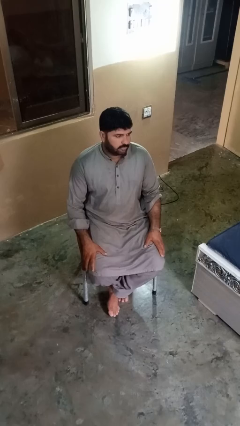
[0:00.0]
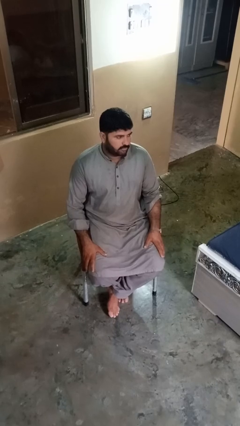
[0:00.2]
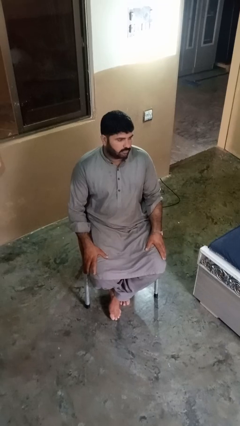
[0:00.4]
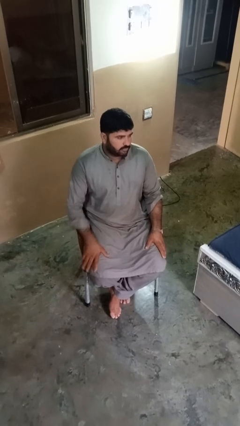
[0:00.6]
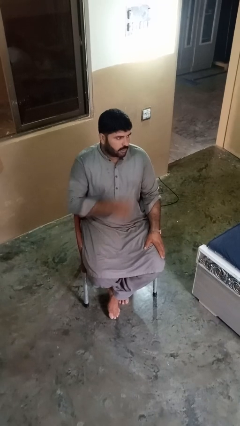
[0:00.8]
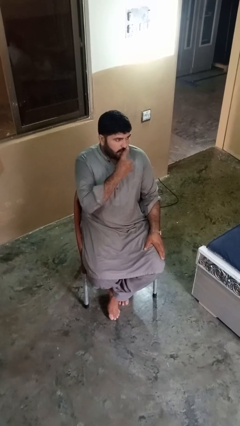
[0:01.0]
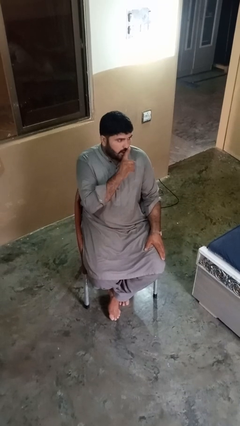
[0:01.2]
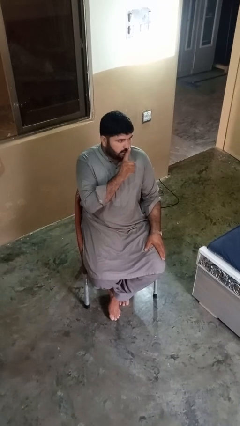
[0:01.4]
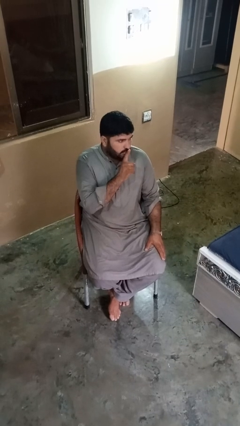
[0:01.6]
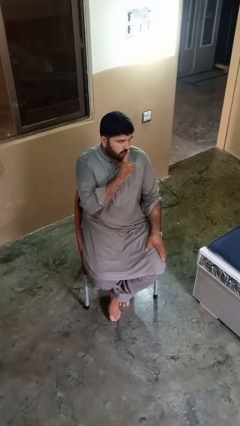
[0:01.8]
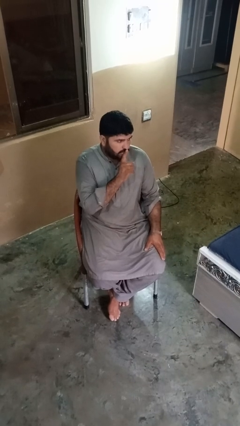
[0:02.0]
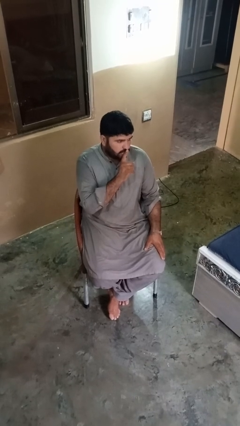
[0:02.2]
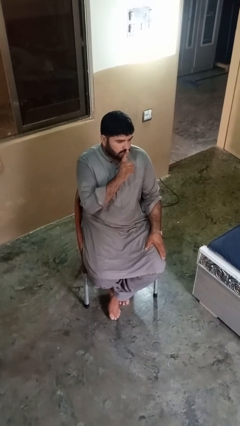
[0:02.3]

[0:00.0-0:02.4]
person gestures be quiet

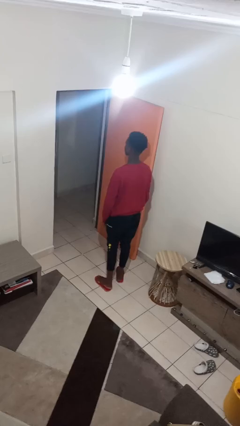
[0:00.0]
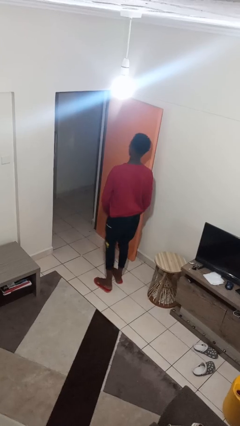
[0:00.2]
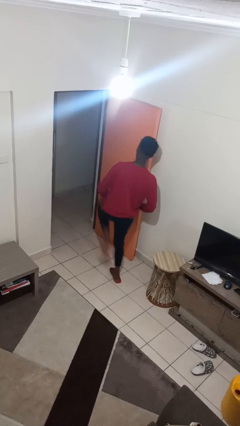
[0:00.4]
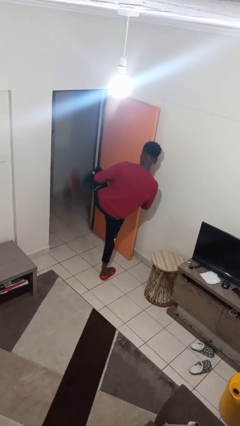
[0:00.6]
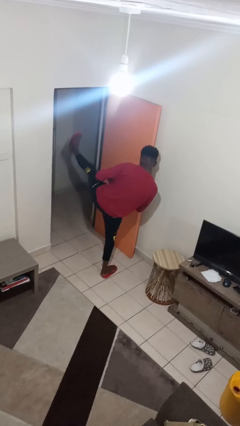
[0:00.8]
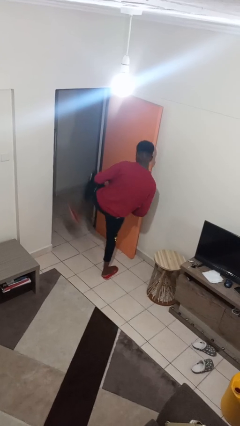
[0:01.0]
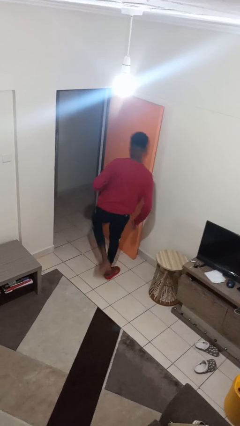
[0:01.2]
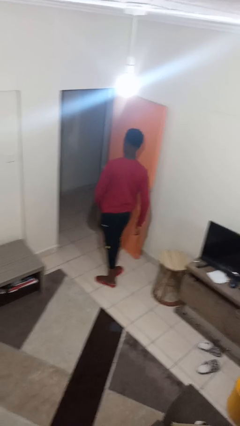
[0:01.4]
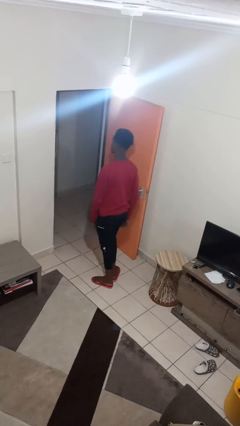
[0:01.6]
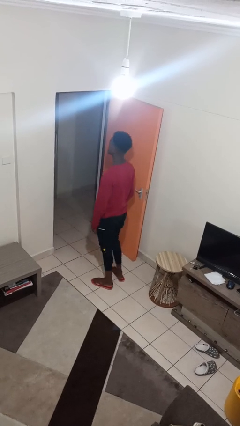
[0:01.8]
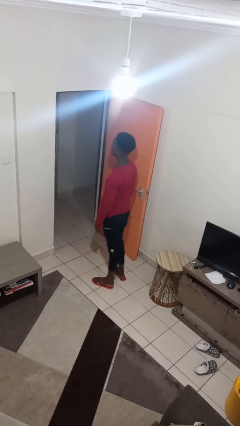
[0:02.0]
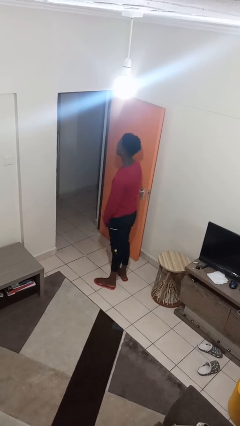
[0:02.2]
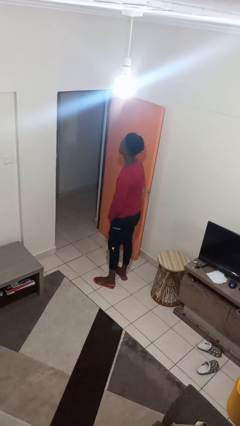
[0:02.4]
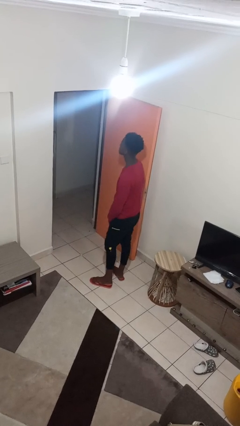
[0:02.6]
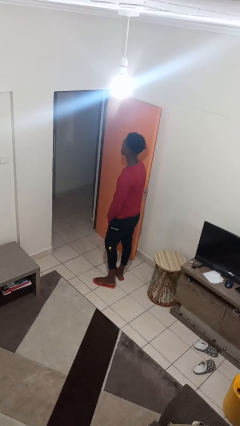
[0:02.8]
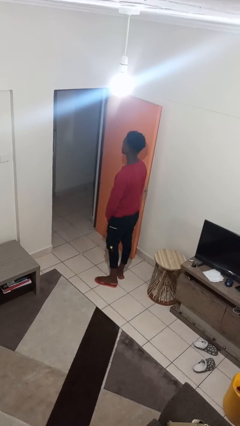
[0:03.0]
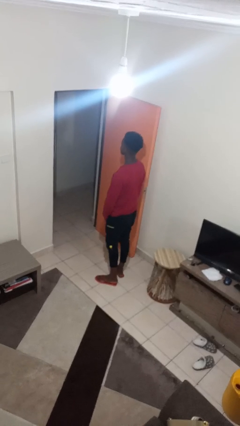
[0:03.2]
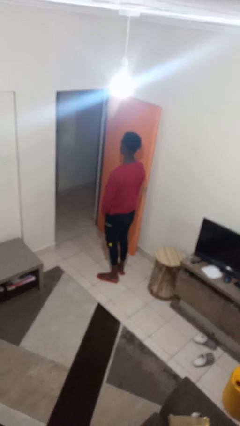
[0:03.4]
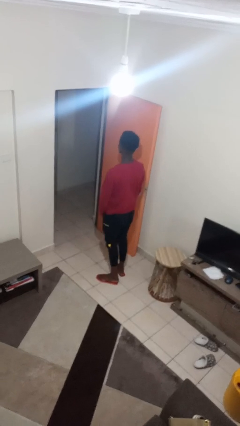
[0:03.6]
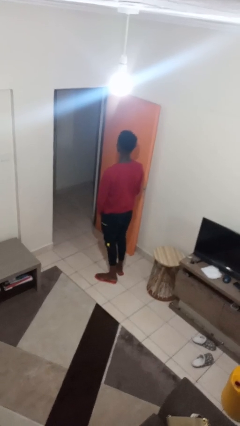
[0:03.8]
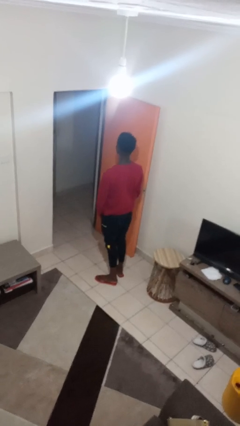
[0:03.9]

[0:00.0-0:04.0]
person karate kicks

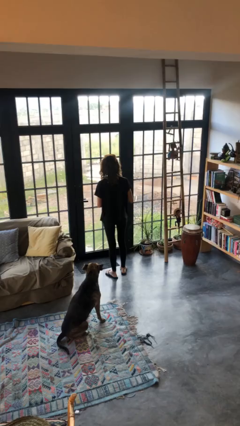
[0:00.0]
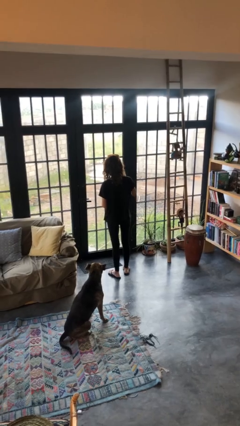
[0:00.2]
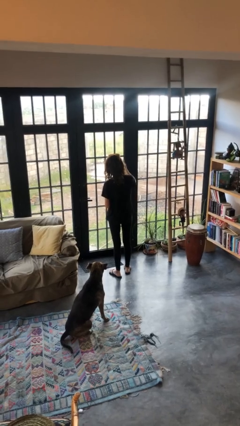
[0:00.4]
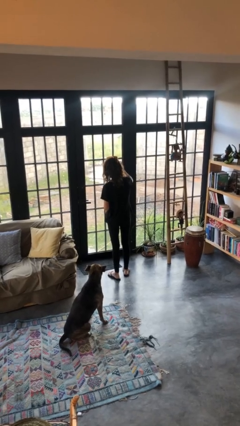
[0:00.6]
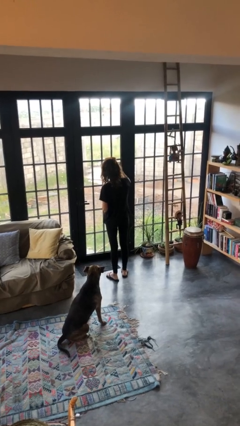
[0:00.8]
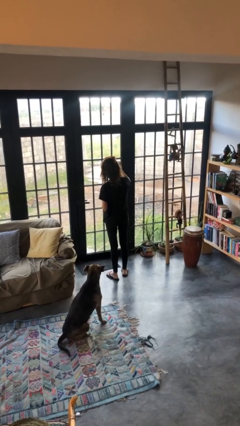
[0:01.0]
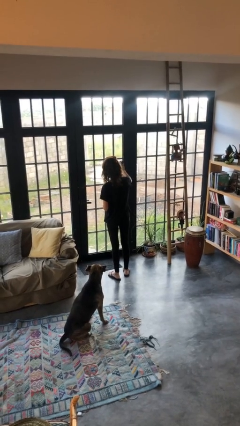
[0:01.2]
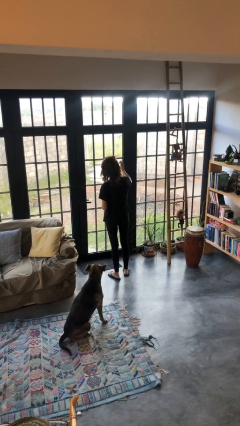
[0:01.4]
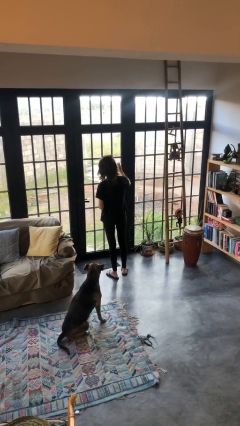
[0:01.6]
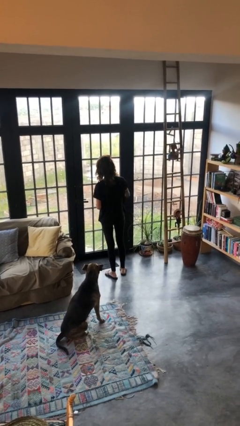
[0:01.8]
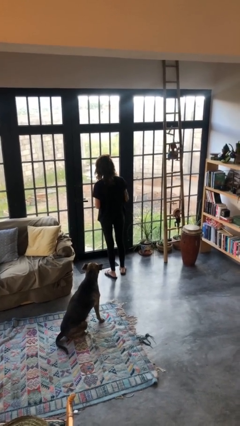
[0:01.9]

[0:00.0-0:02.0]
person sprays from bottle

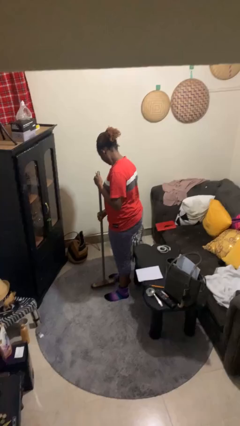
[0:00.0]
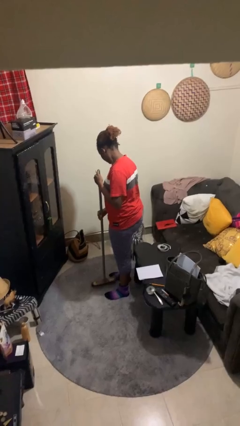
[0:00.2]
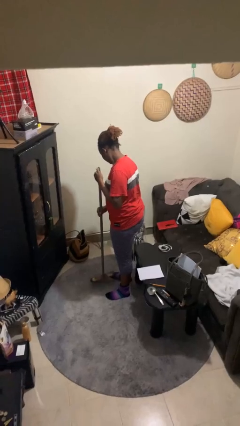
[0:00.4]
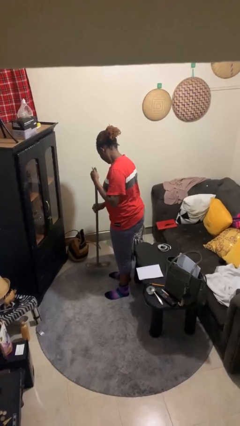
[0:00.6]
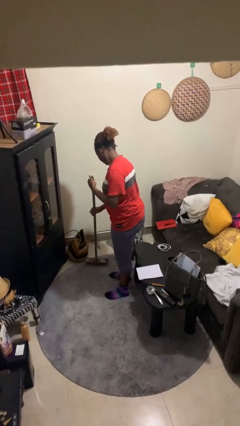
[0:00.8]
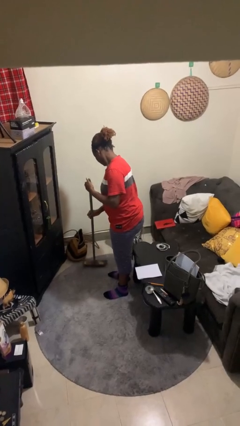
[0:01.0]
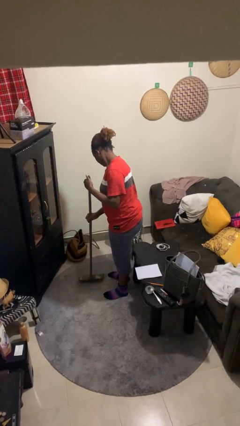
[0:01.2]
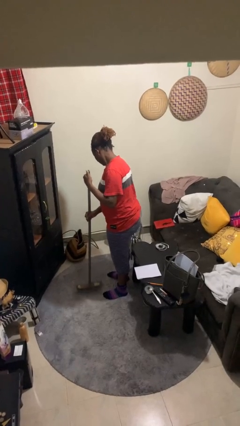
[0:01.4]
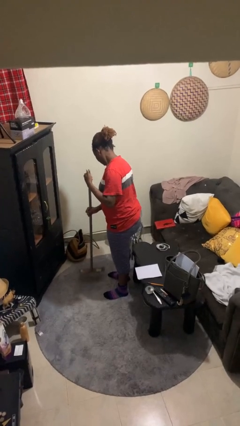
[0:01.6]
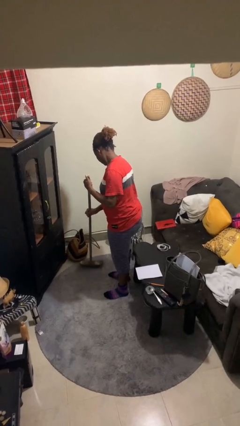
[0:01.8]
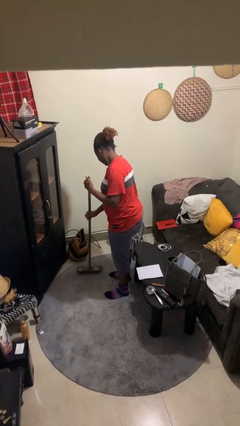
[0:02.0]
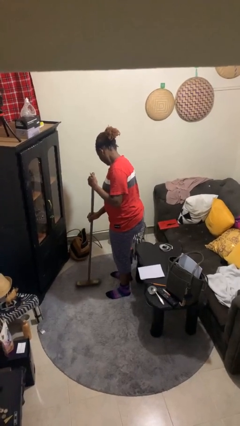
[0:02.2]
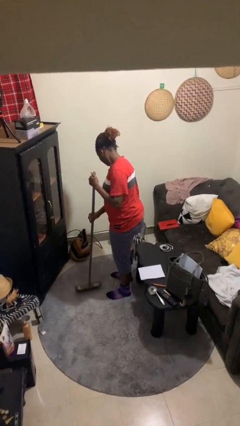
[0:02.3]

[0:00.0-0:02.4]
person sweeps floor

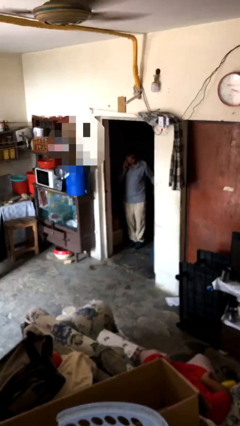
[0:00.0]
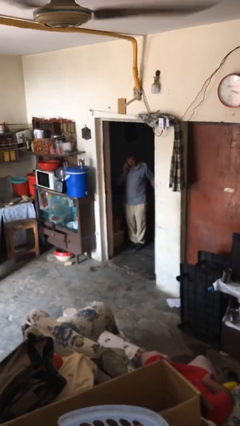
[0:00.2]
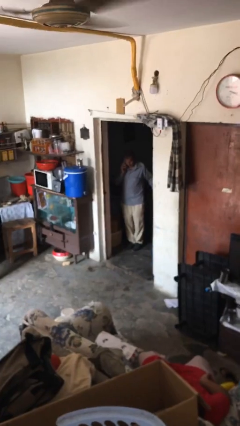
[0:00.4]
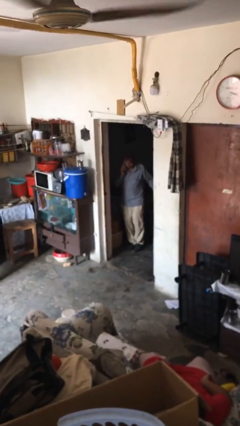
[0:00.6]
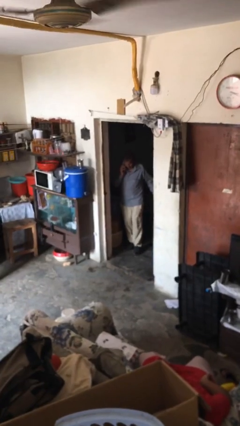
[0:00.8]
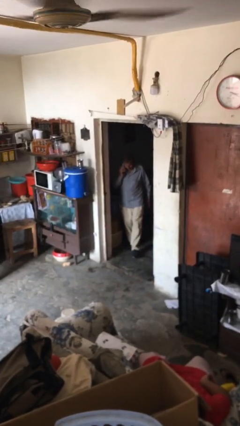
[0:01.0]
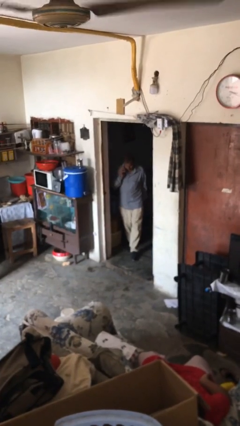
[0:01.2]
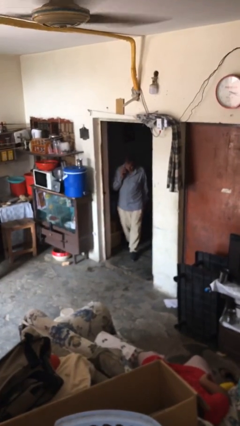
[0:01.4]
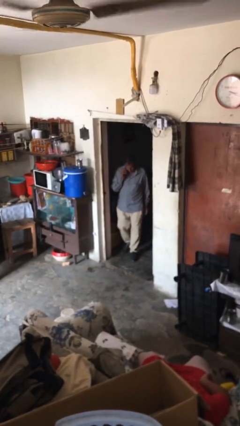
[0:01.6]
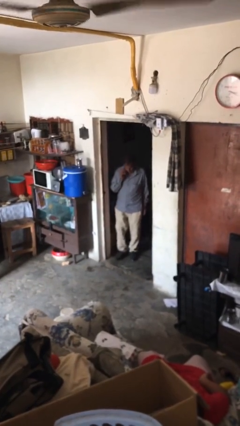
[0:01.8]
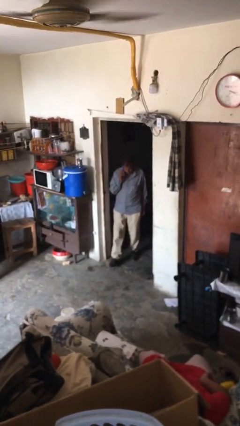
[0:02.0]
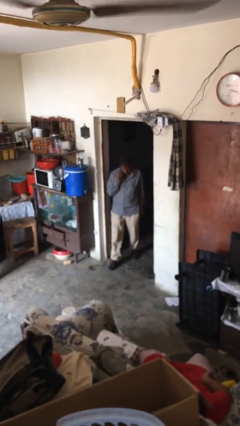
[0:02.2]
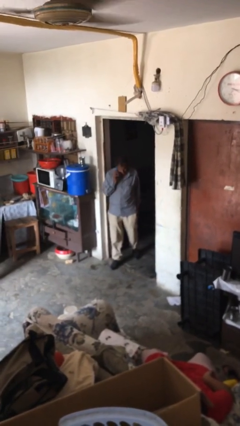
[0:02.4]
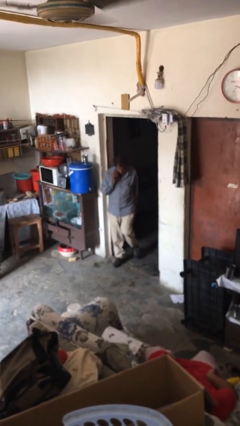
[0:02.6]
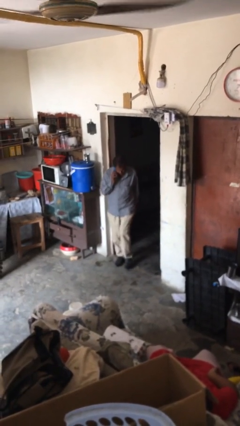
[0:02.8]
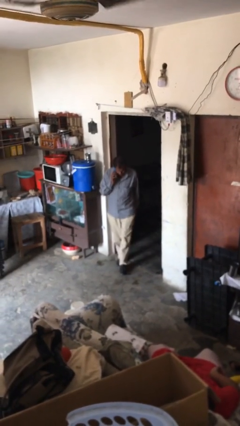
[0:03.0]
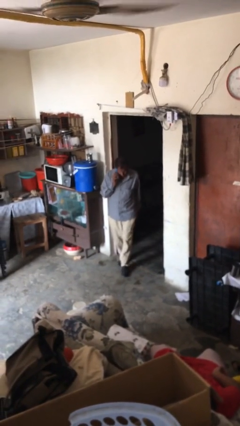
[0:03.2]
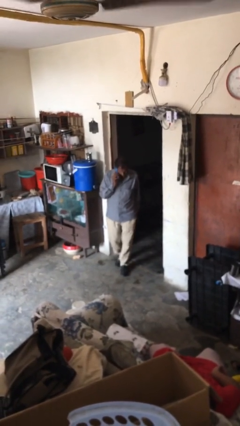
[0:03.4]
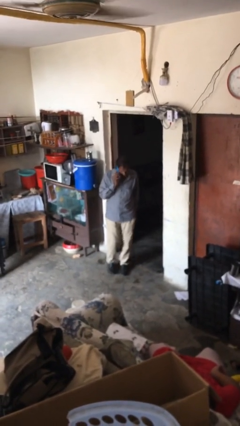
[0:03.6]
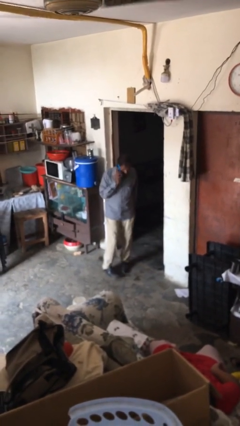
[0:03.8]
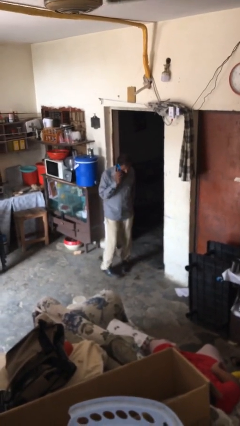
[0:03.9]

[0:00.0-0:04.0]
person enters scene through structure

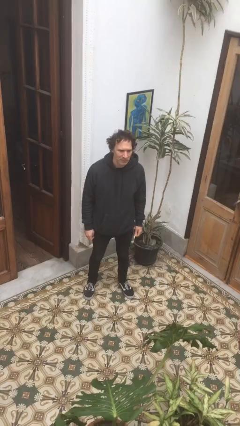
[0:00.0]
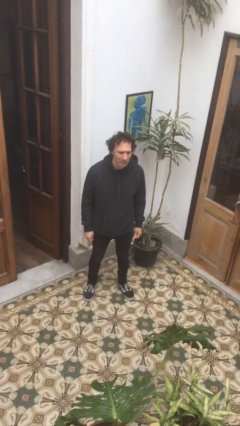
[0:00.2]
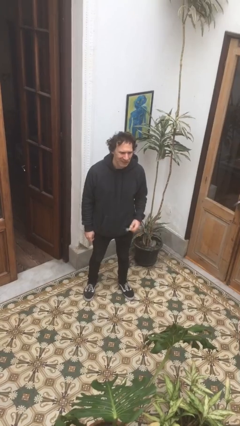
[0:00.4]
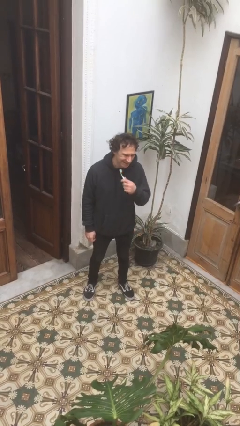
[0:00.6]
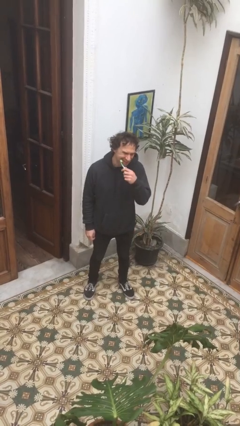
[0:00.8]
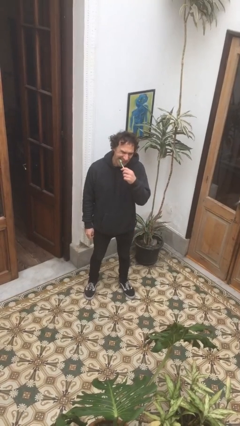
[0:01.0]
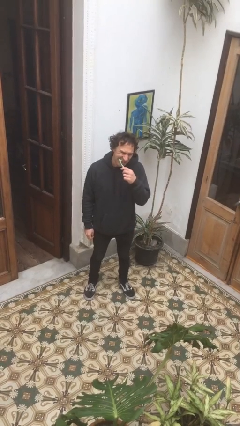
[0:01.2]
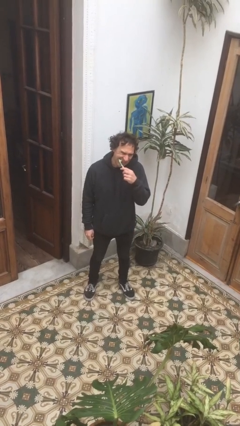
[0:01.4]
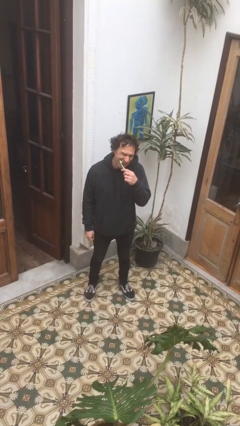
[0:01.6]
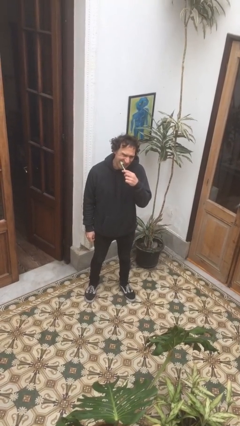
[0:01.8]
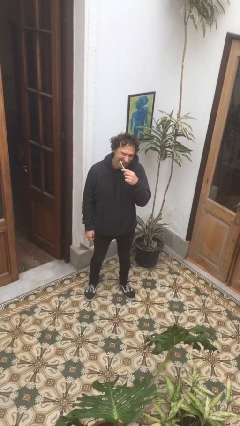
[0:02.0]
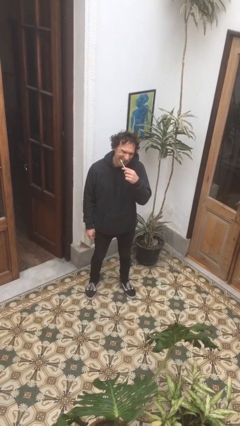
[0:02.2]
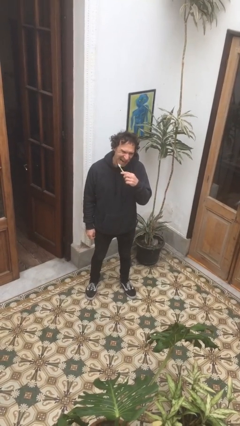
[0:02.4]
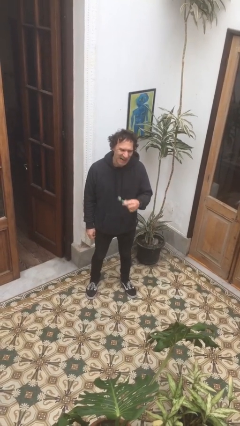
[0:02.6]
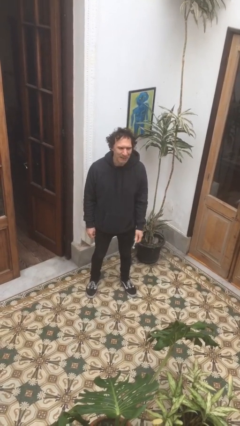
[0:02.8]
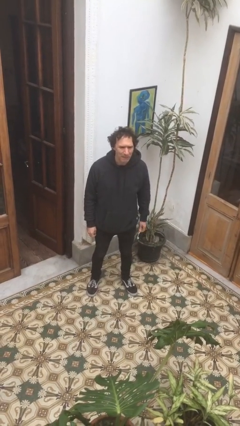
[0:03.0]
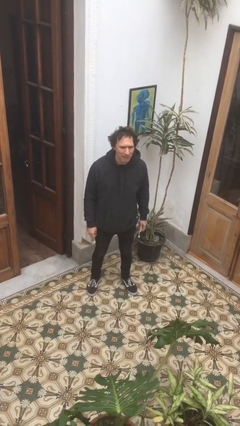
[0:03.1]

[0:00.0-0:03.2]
person brushes teeth
